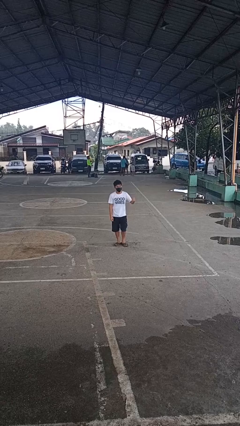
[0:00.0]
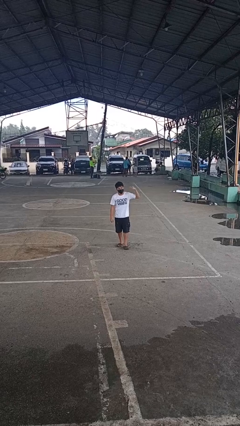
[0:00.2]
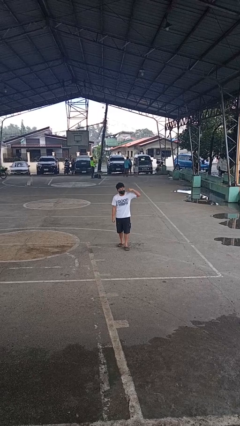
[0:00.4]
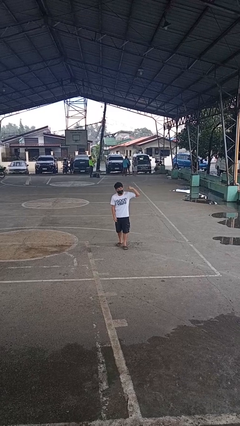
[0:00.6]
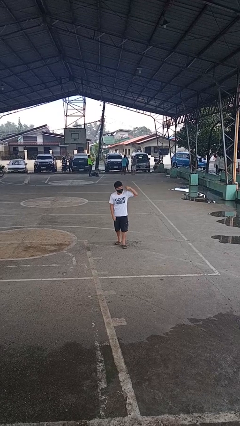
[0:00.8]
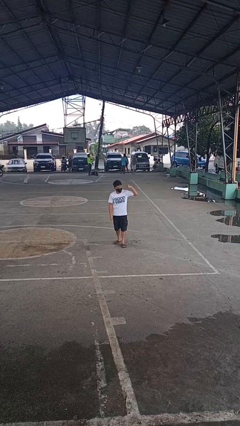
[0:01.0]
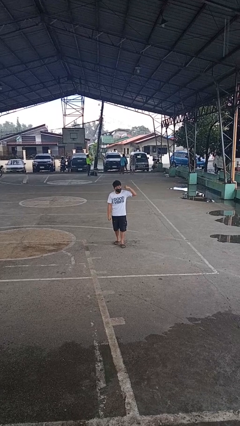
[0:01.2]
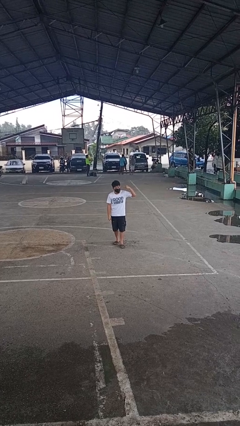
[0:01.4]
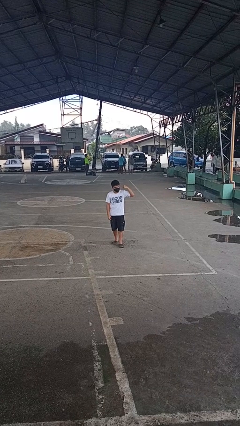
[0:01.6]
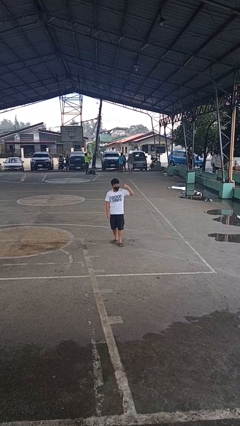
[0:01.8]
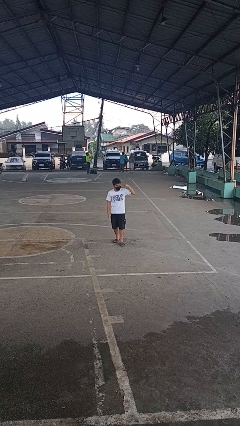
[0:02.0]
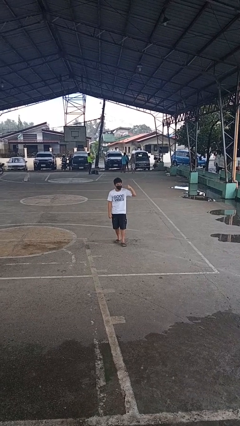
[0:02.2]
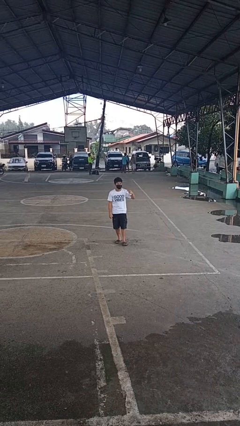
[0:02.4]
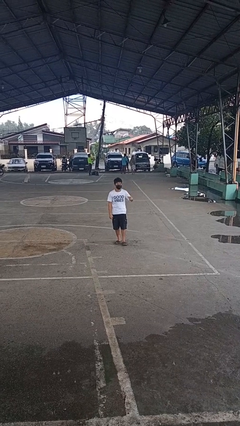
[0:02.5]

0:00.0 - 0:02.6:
person gestures listen closely

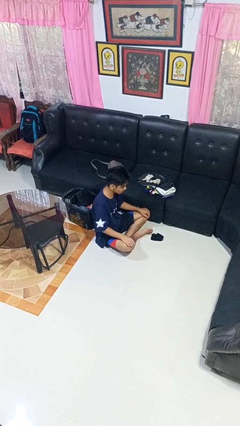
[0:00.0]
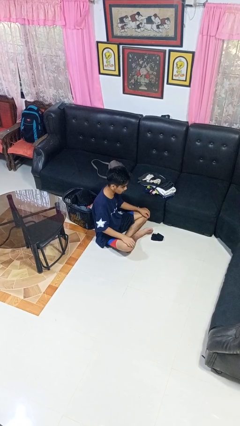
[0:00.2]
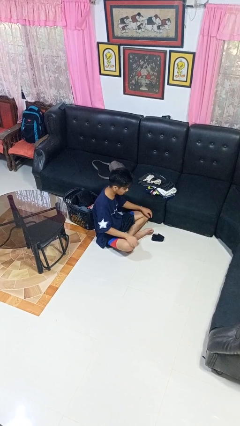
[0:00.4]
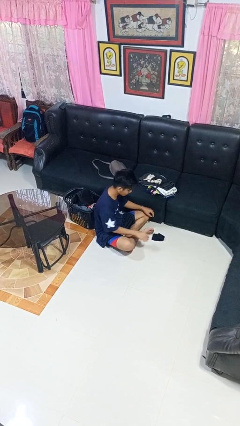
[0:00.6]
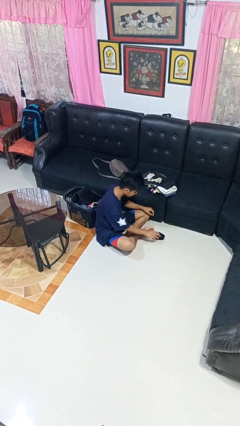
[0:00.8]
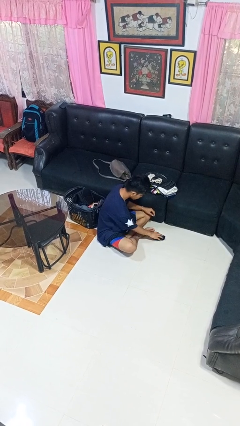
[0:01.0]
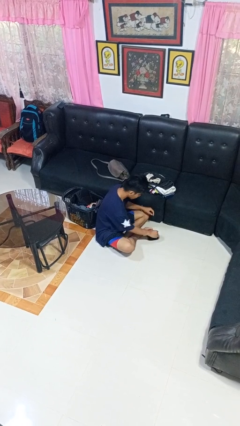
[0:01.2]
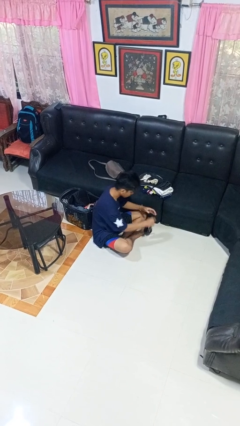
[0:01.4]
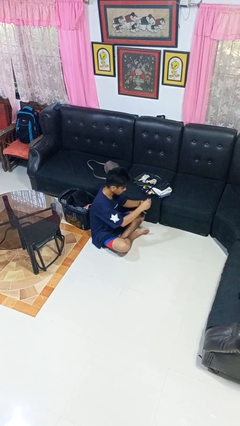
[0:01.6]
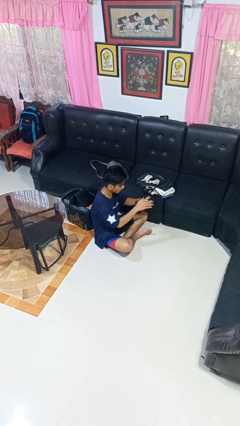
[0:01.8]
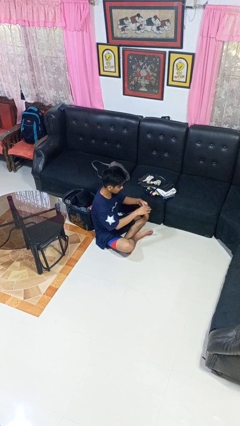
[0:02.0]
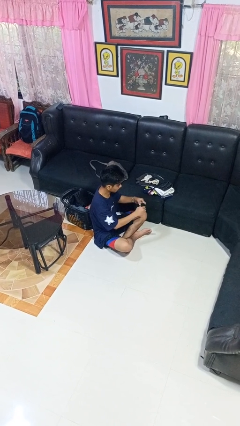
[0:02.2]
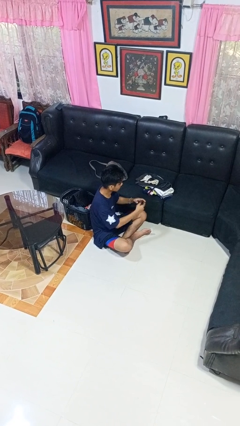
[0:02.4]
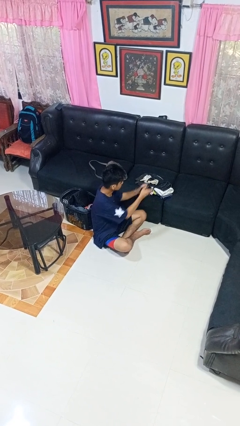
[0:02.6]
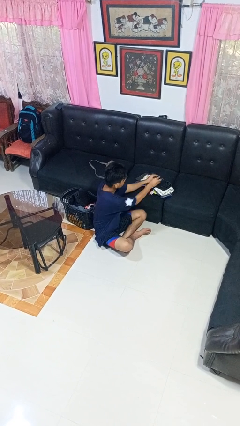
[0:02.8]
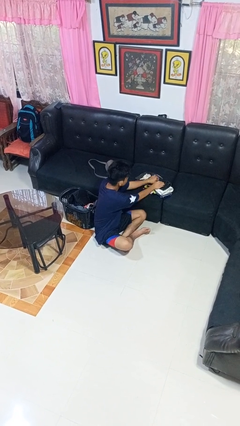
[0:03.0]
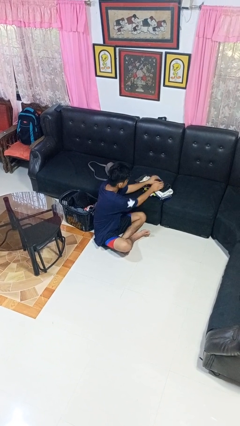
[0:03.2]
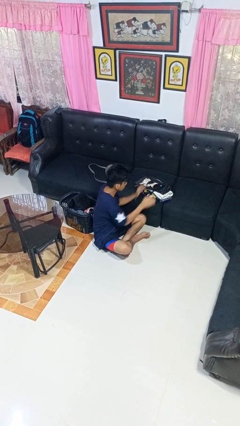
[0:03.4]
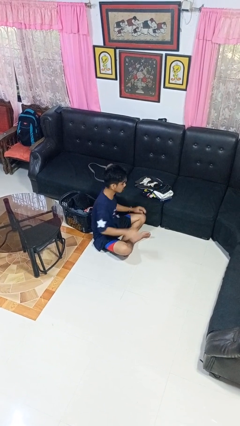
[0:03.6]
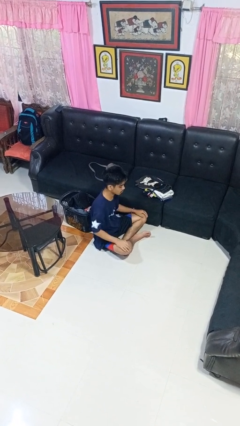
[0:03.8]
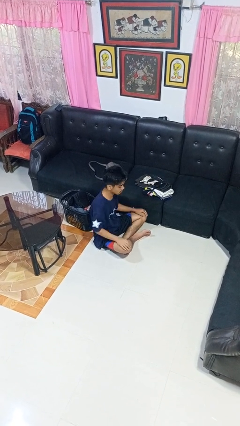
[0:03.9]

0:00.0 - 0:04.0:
person folds socks

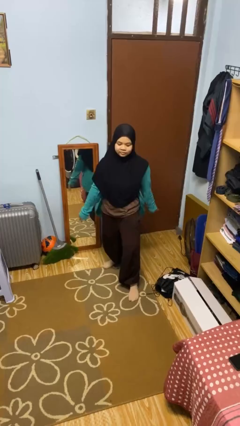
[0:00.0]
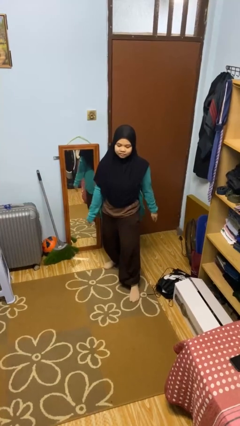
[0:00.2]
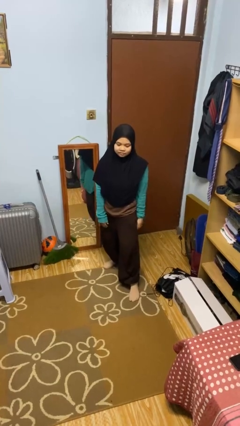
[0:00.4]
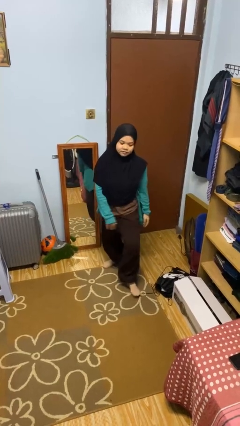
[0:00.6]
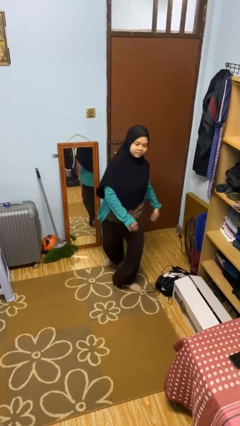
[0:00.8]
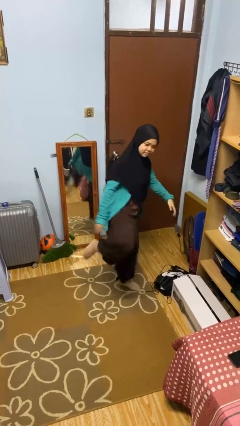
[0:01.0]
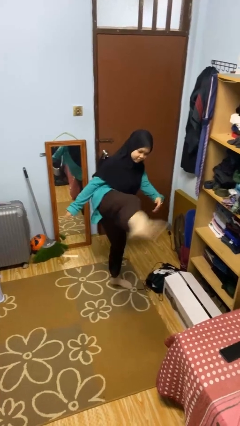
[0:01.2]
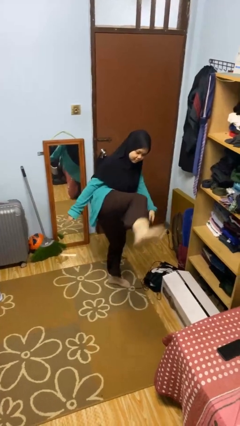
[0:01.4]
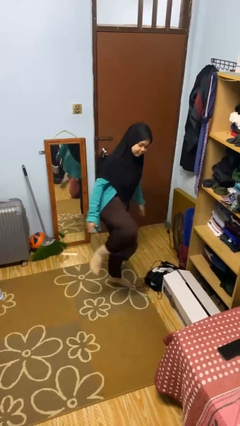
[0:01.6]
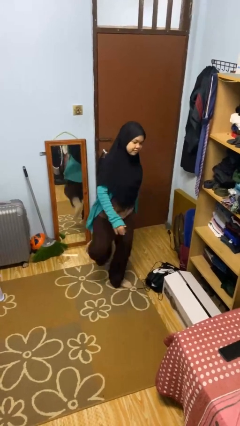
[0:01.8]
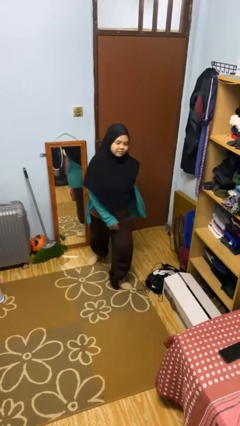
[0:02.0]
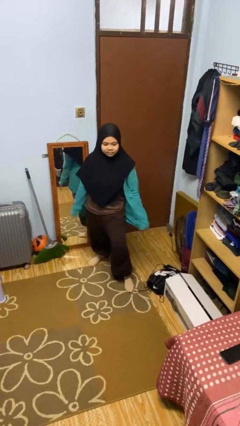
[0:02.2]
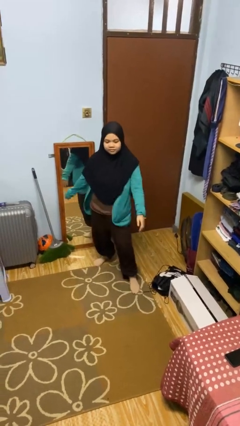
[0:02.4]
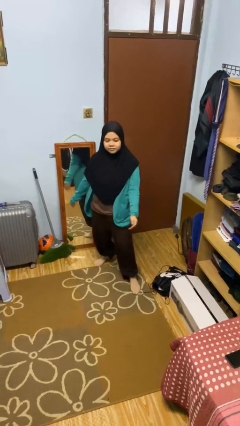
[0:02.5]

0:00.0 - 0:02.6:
person karate kicks

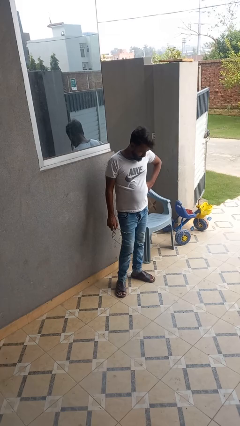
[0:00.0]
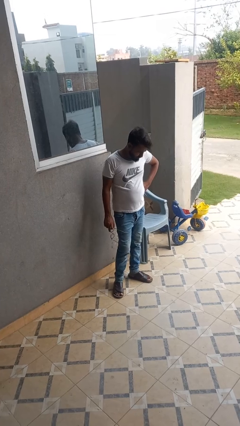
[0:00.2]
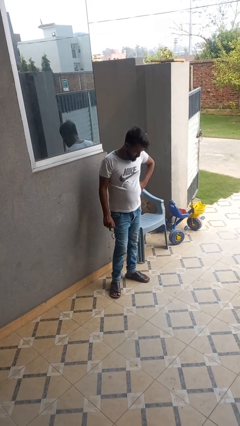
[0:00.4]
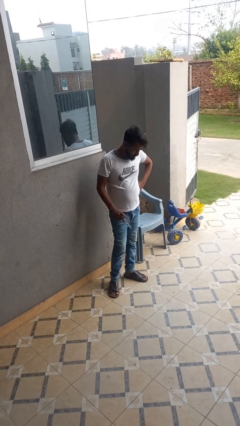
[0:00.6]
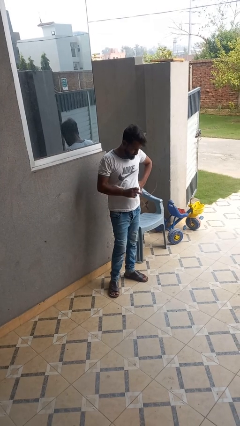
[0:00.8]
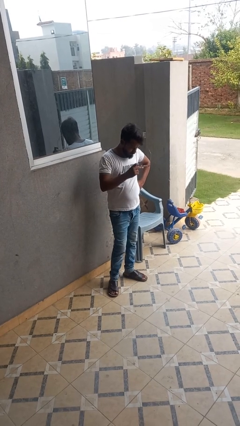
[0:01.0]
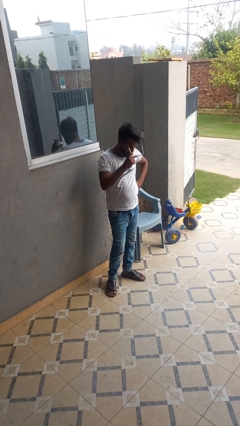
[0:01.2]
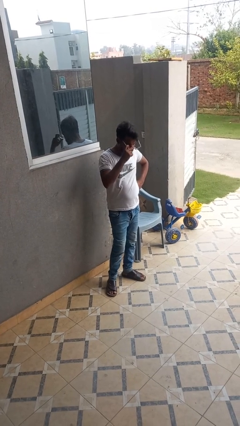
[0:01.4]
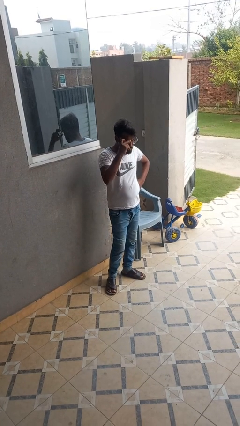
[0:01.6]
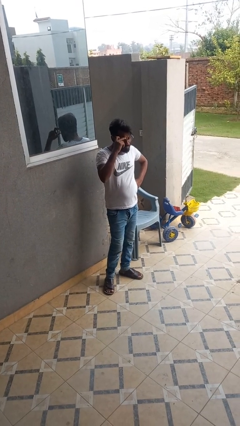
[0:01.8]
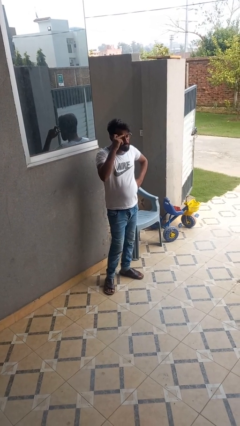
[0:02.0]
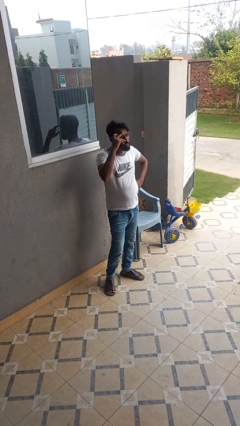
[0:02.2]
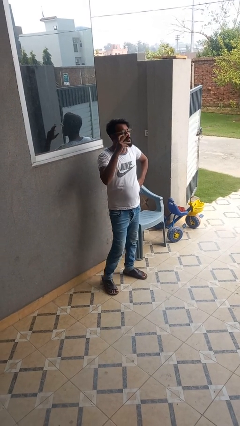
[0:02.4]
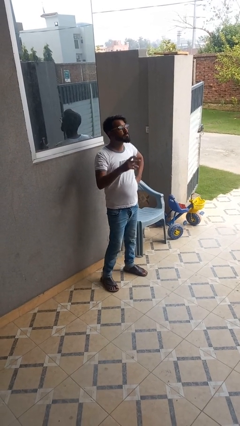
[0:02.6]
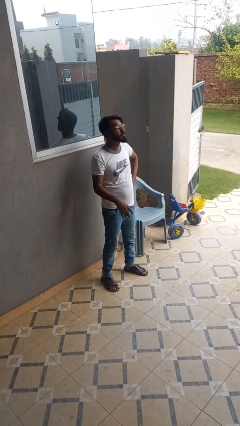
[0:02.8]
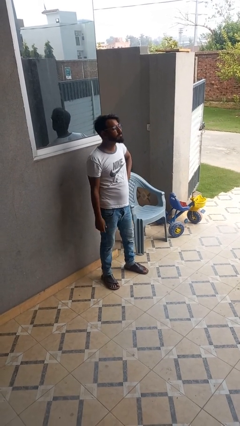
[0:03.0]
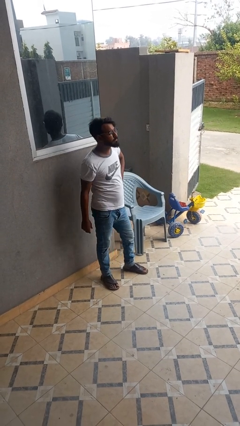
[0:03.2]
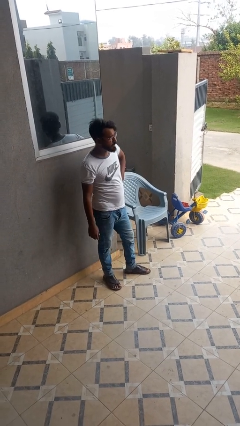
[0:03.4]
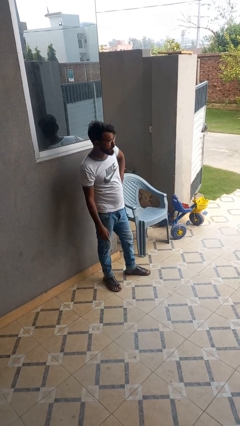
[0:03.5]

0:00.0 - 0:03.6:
person puts on glasses

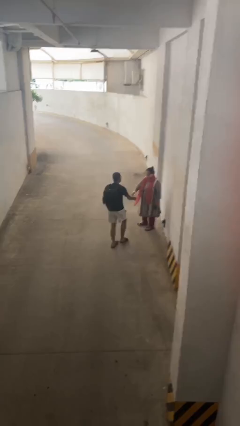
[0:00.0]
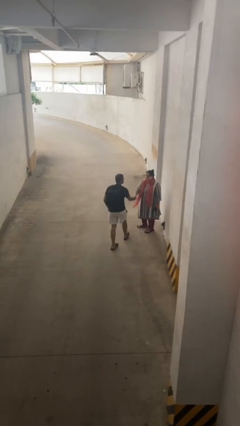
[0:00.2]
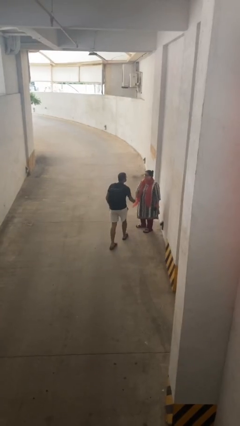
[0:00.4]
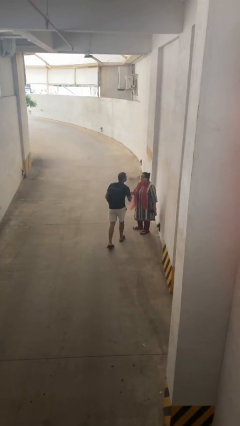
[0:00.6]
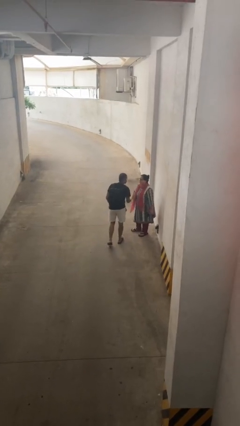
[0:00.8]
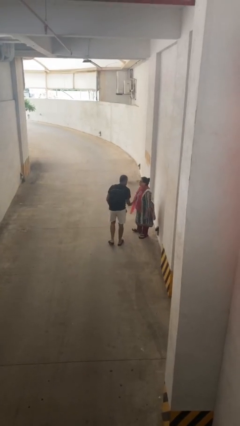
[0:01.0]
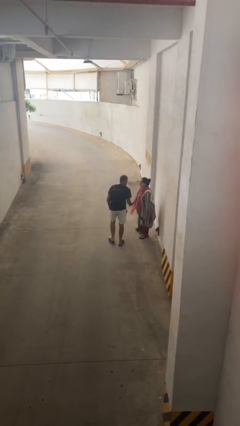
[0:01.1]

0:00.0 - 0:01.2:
person shakes hand

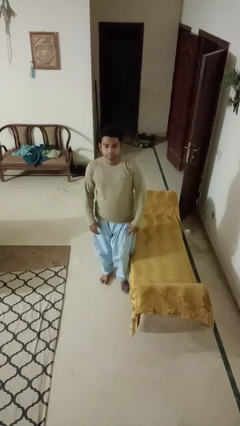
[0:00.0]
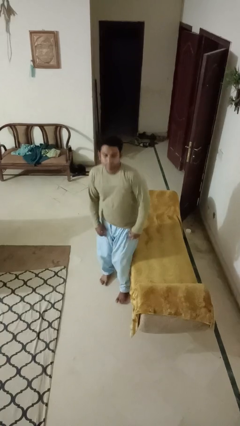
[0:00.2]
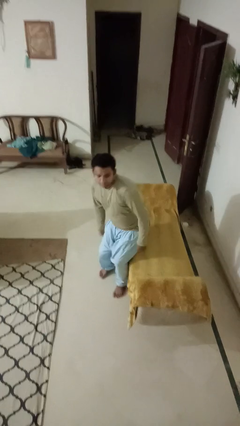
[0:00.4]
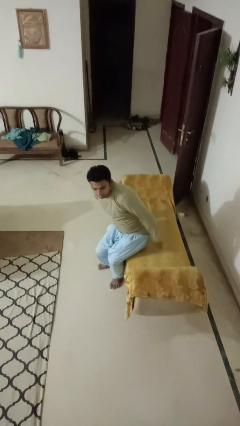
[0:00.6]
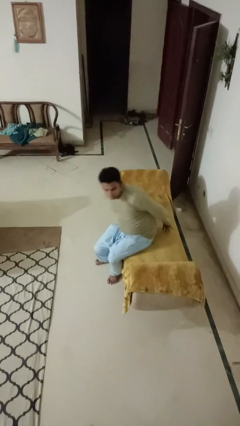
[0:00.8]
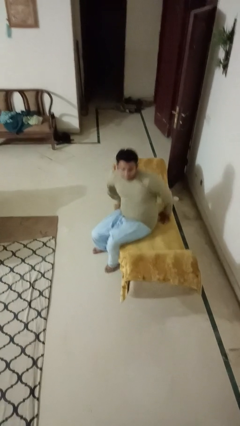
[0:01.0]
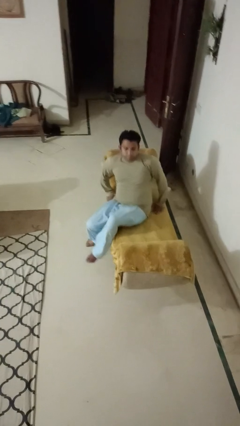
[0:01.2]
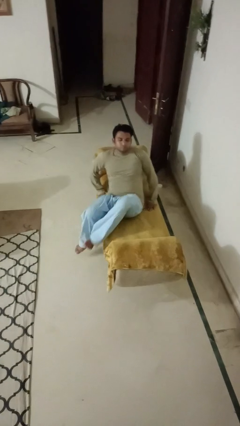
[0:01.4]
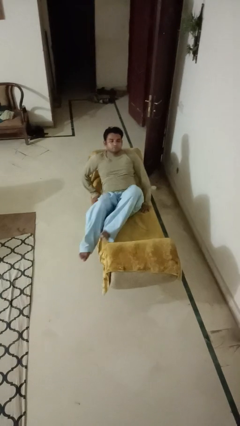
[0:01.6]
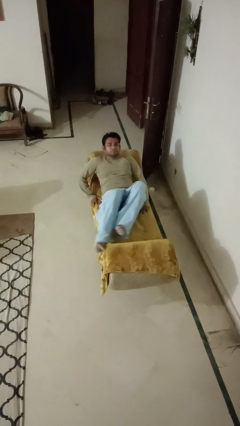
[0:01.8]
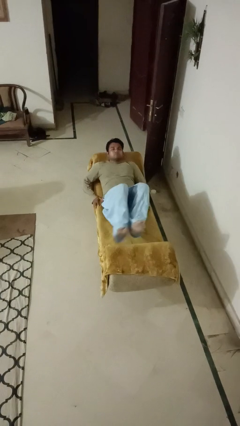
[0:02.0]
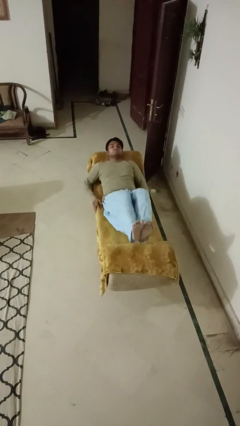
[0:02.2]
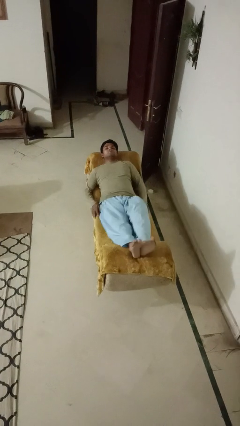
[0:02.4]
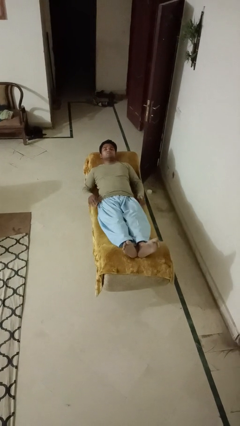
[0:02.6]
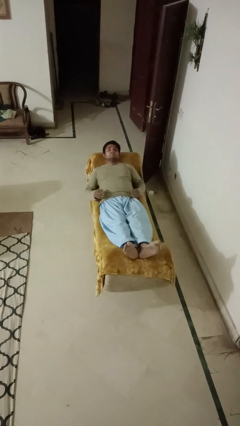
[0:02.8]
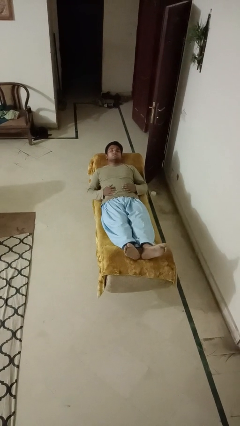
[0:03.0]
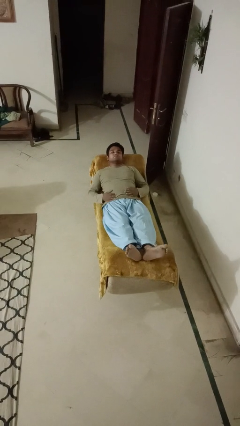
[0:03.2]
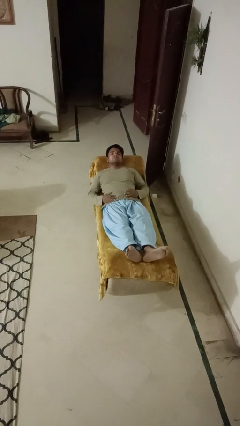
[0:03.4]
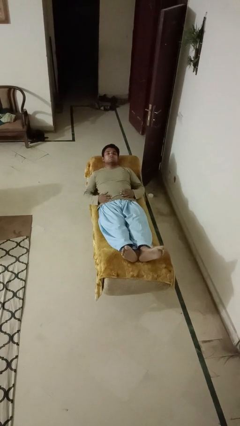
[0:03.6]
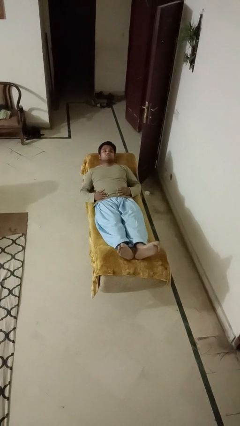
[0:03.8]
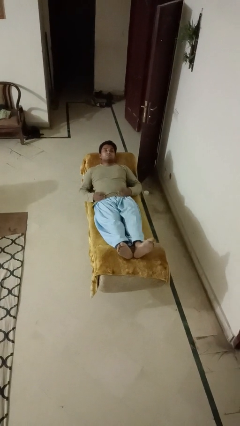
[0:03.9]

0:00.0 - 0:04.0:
person lies down on couch
